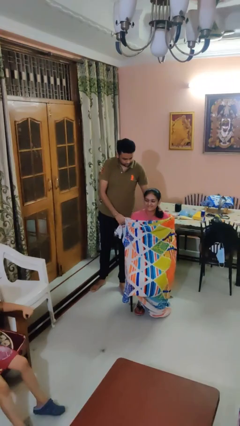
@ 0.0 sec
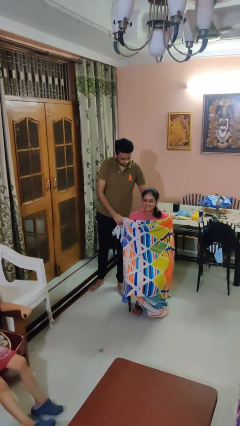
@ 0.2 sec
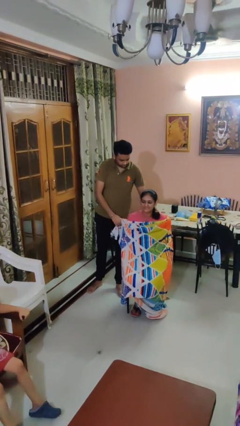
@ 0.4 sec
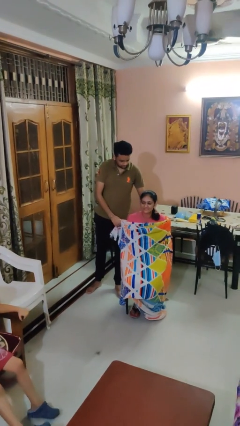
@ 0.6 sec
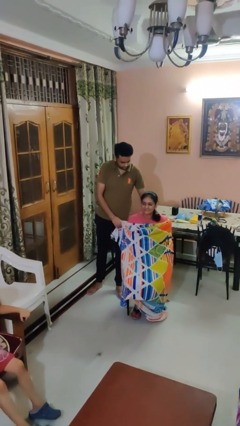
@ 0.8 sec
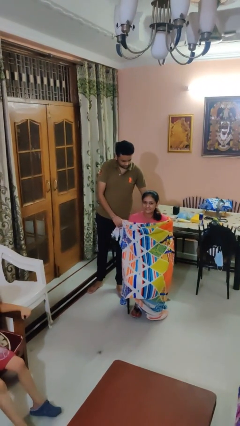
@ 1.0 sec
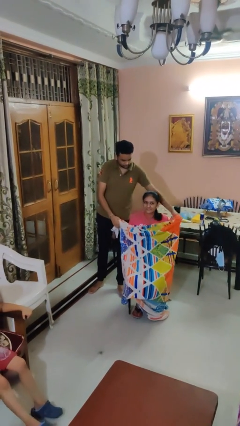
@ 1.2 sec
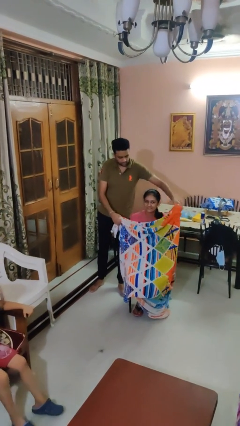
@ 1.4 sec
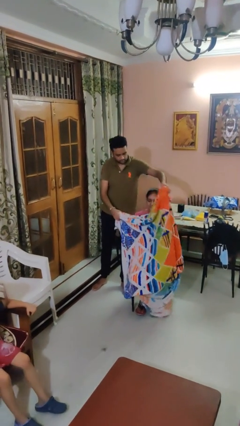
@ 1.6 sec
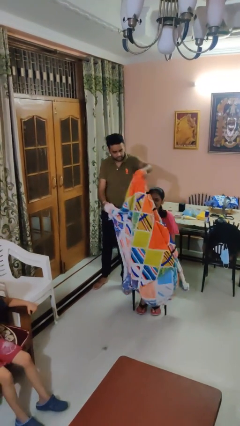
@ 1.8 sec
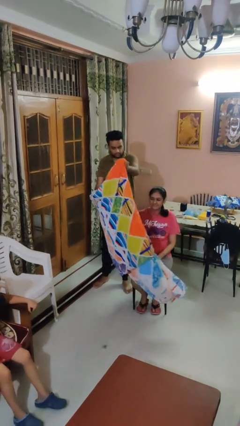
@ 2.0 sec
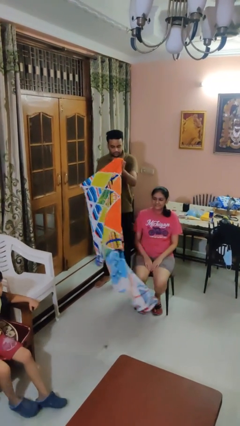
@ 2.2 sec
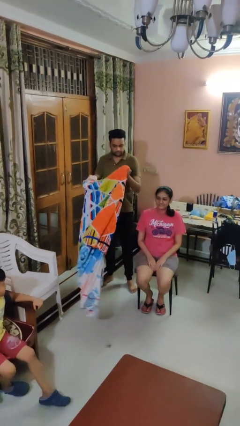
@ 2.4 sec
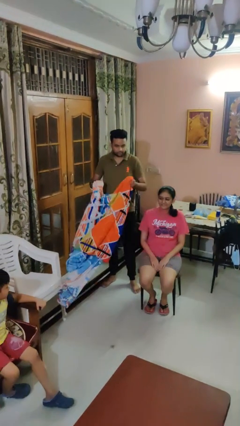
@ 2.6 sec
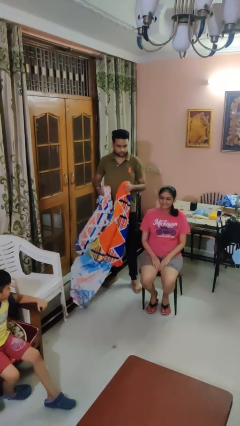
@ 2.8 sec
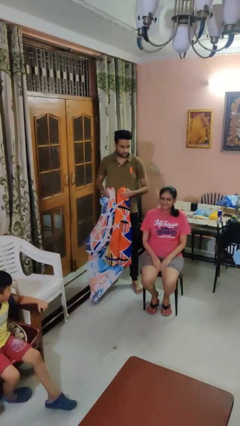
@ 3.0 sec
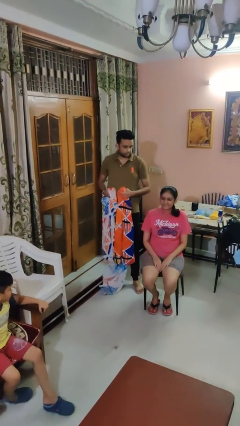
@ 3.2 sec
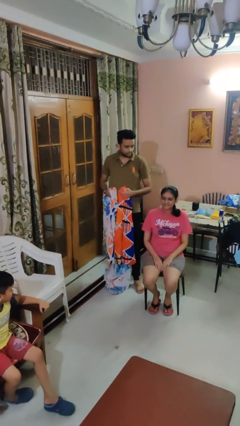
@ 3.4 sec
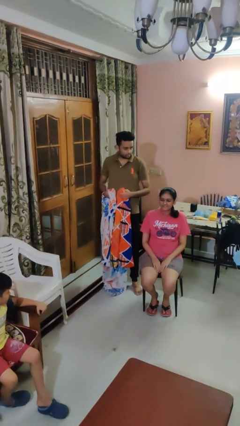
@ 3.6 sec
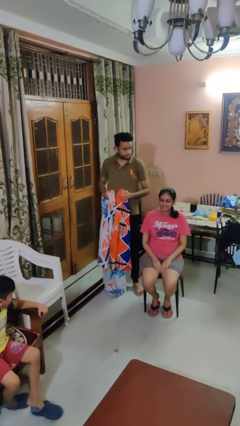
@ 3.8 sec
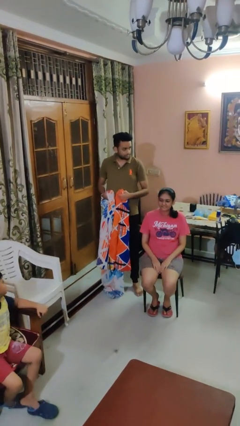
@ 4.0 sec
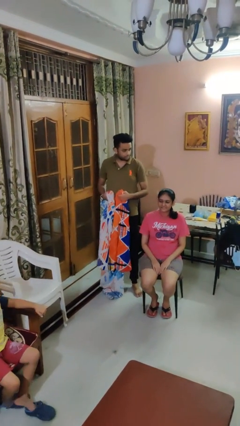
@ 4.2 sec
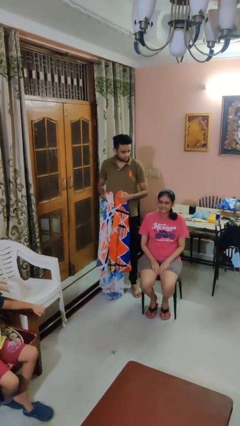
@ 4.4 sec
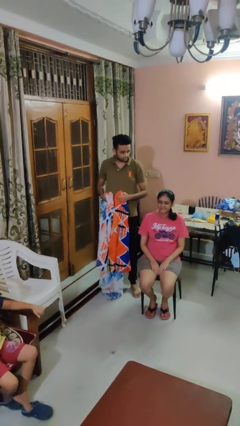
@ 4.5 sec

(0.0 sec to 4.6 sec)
person uncovers friend with blanket

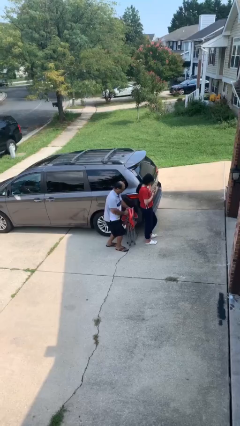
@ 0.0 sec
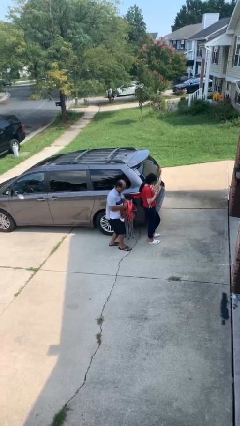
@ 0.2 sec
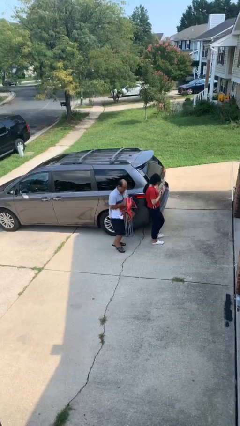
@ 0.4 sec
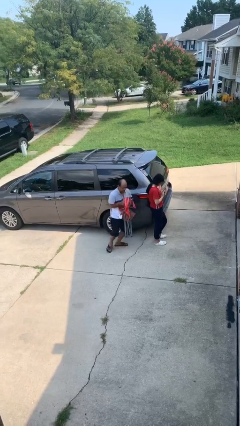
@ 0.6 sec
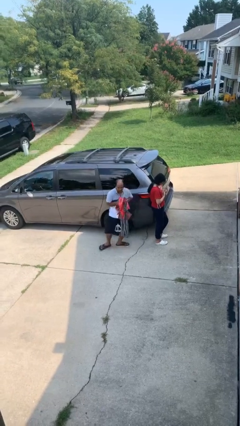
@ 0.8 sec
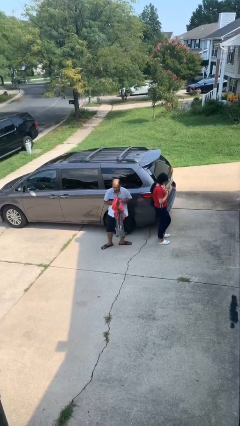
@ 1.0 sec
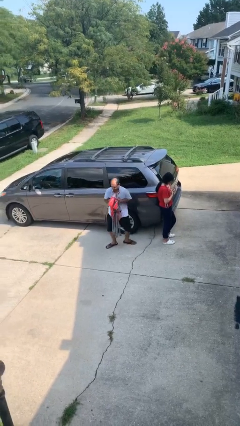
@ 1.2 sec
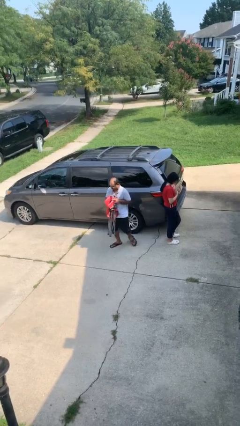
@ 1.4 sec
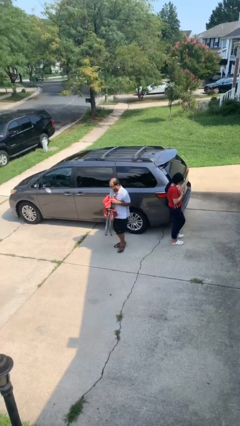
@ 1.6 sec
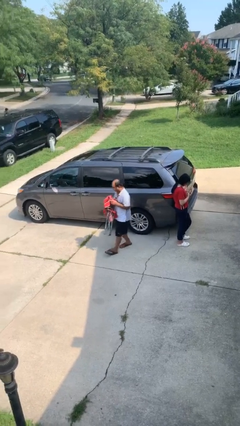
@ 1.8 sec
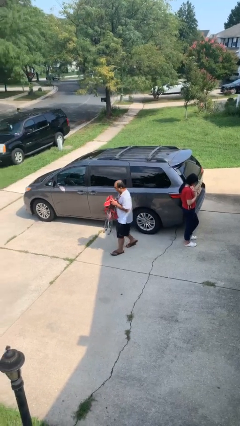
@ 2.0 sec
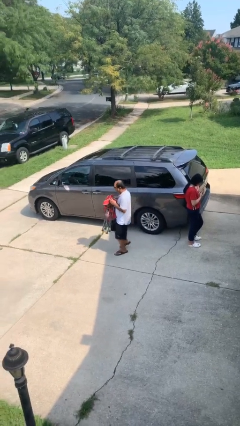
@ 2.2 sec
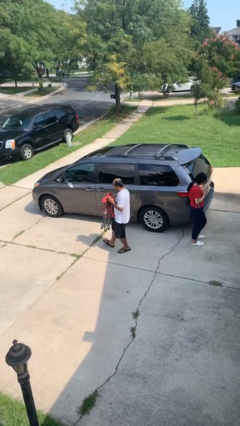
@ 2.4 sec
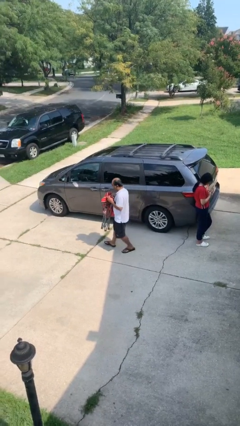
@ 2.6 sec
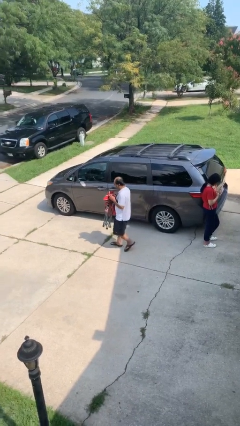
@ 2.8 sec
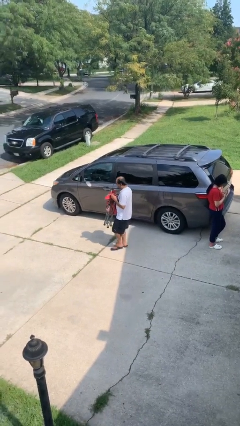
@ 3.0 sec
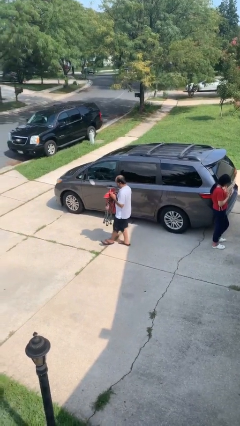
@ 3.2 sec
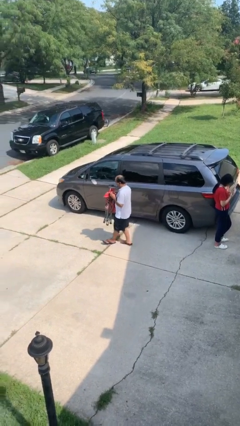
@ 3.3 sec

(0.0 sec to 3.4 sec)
person steals object from person

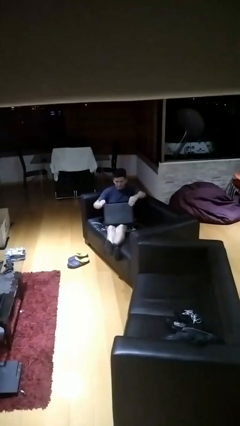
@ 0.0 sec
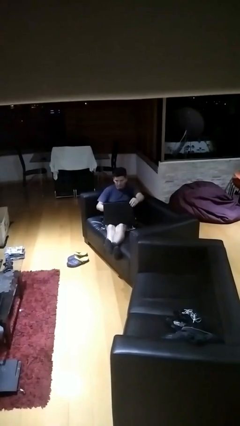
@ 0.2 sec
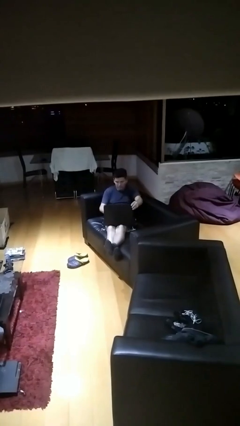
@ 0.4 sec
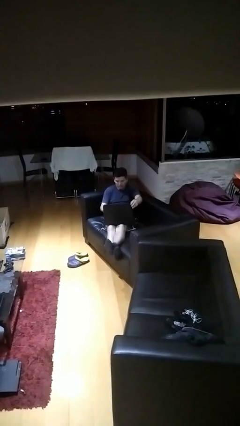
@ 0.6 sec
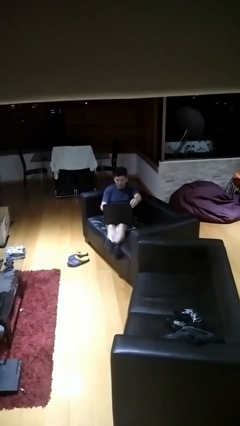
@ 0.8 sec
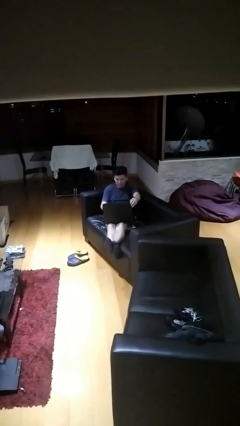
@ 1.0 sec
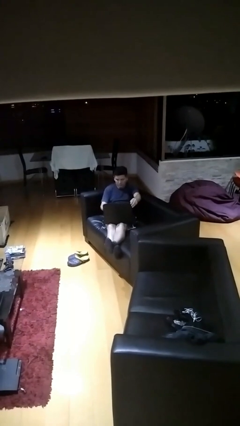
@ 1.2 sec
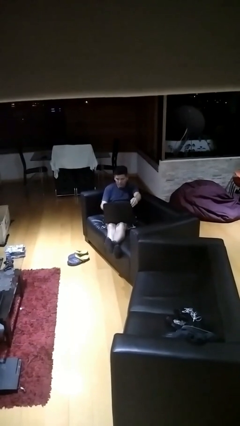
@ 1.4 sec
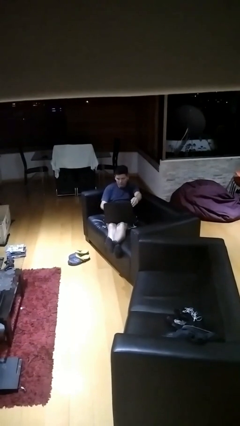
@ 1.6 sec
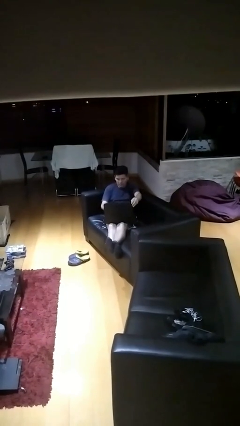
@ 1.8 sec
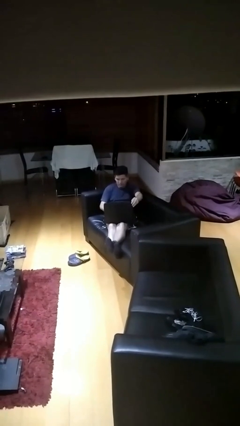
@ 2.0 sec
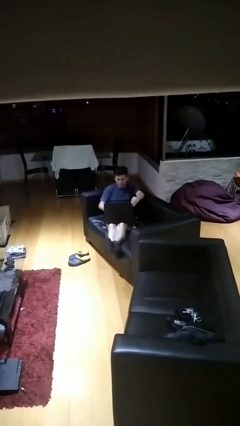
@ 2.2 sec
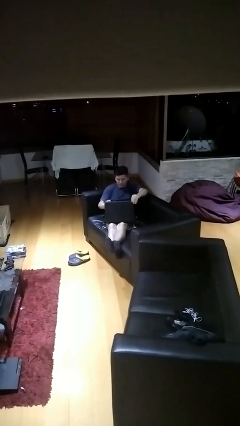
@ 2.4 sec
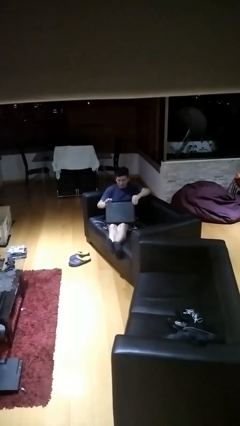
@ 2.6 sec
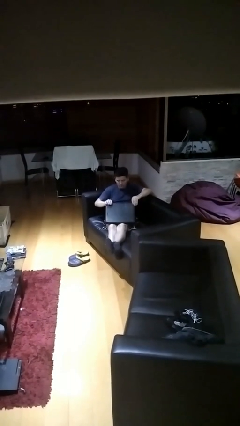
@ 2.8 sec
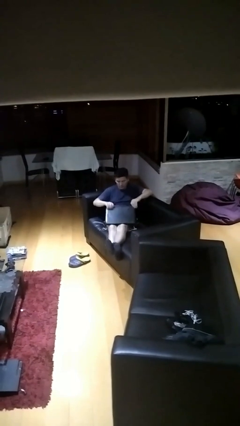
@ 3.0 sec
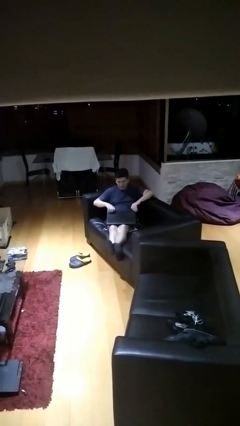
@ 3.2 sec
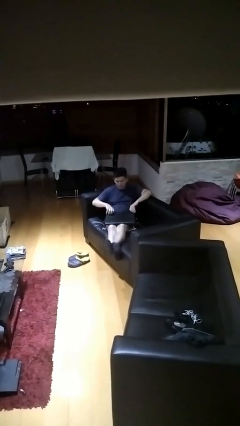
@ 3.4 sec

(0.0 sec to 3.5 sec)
person interacts with laptop

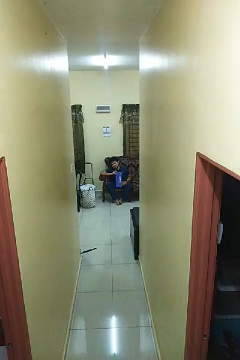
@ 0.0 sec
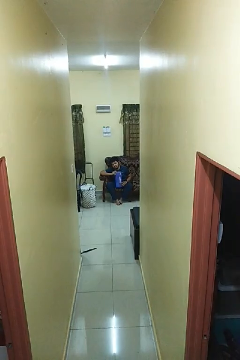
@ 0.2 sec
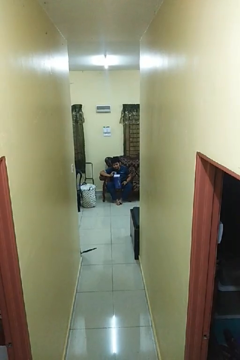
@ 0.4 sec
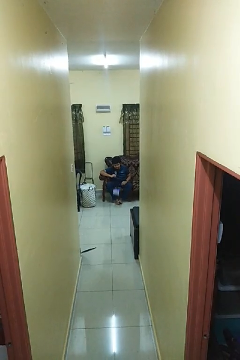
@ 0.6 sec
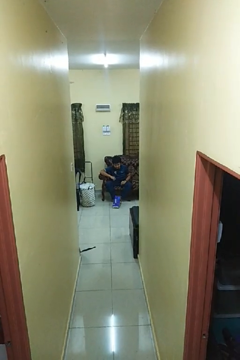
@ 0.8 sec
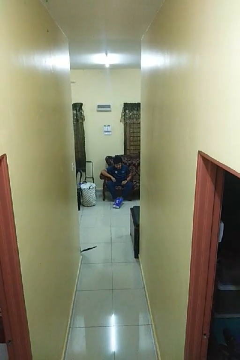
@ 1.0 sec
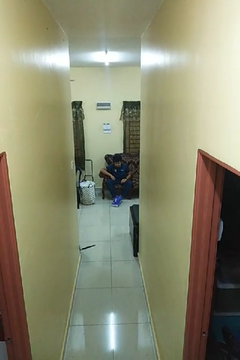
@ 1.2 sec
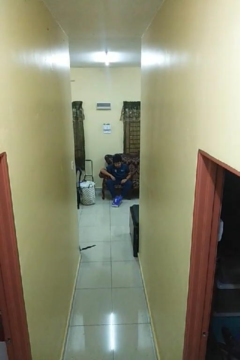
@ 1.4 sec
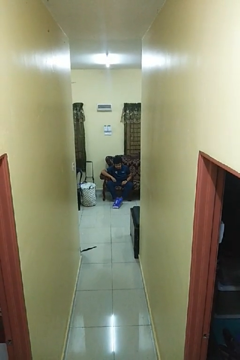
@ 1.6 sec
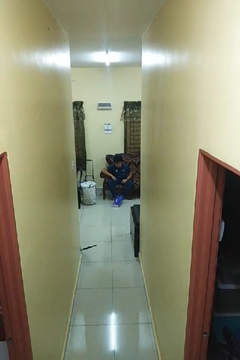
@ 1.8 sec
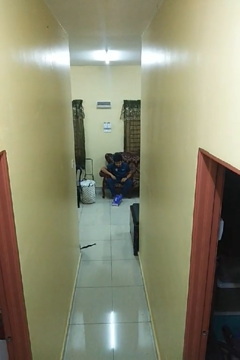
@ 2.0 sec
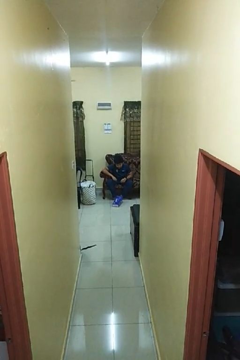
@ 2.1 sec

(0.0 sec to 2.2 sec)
person drops object

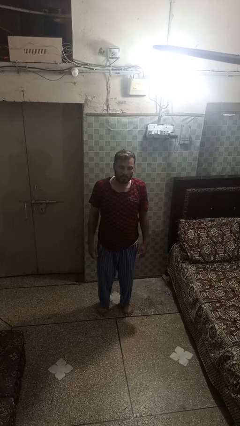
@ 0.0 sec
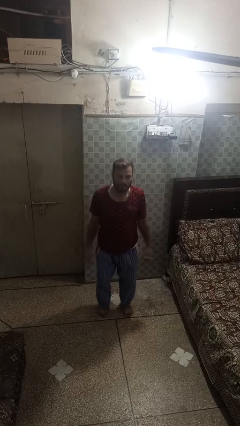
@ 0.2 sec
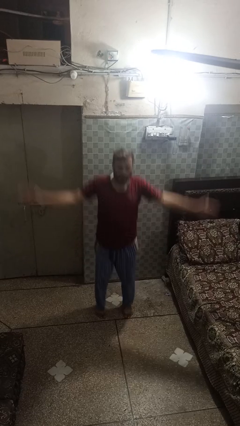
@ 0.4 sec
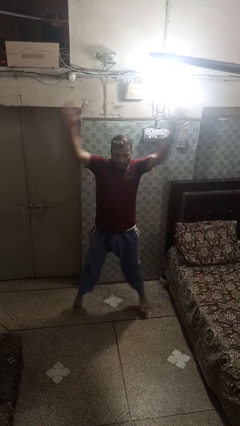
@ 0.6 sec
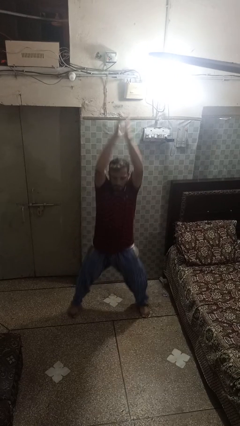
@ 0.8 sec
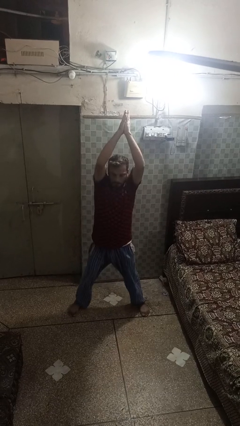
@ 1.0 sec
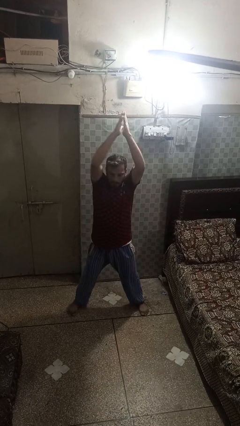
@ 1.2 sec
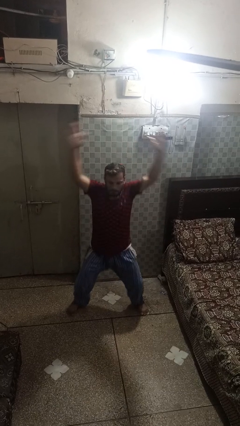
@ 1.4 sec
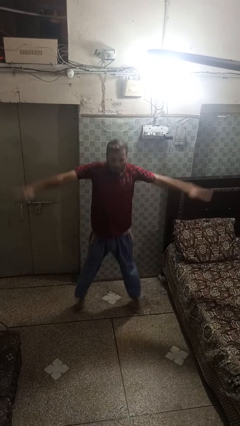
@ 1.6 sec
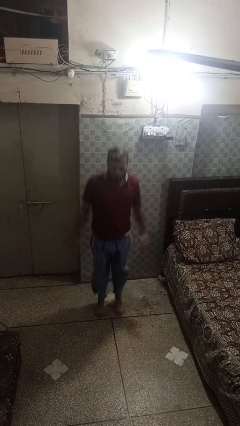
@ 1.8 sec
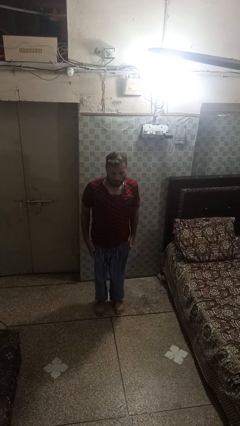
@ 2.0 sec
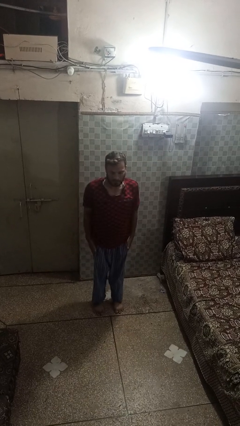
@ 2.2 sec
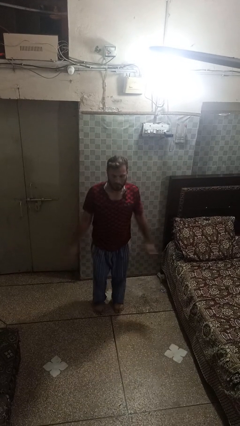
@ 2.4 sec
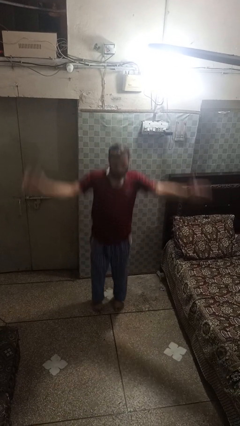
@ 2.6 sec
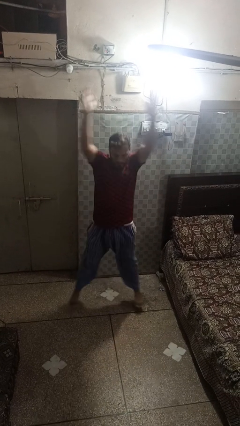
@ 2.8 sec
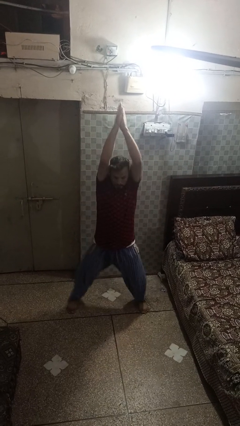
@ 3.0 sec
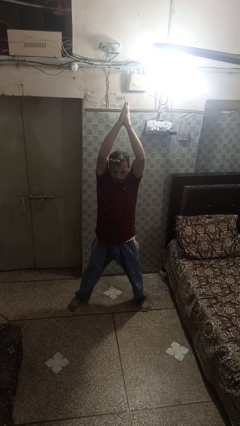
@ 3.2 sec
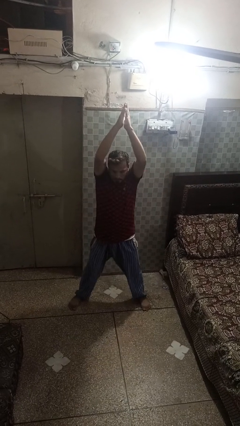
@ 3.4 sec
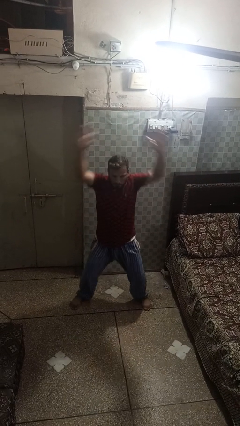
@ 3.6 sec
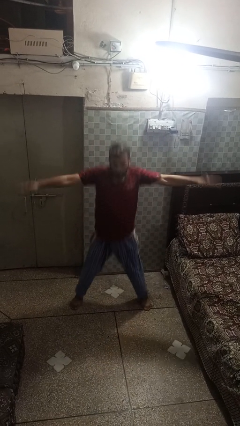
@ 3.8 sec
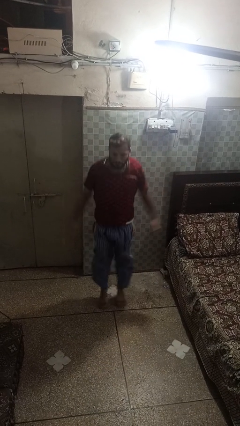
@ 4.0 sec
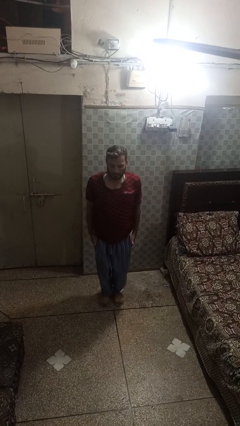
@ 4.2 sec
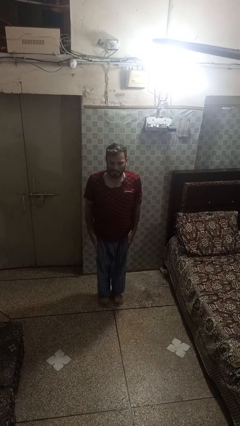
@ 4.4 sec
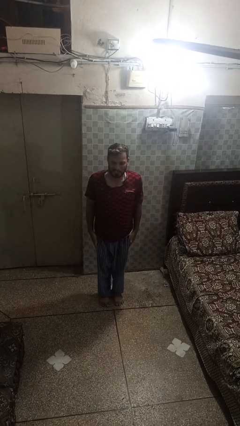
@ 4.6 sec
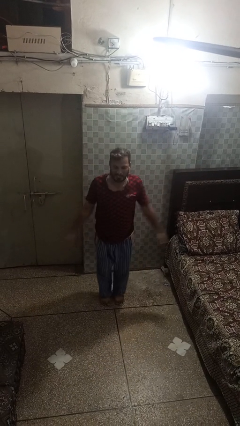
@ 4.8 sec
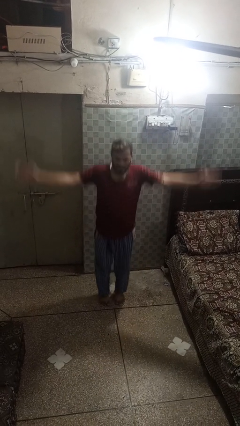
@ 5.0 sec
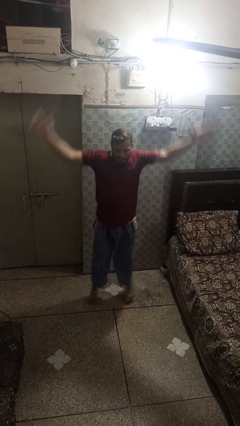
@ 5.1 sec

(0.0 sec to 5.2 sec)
person exercises with jumping jacks
